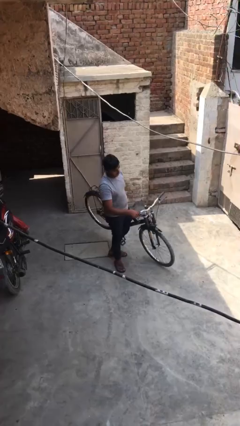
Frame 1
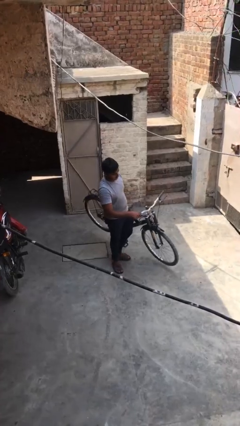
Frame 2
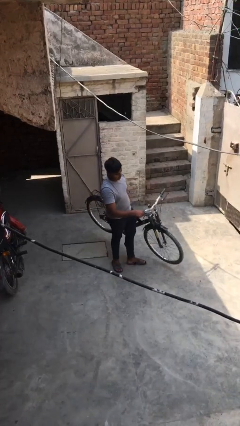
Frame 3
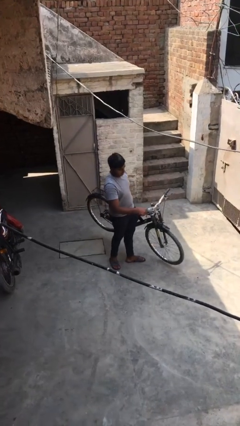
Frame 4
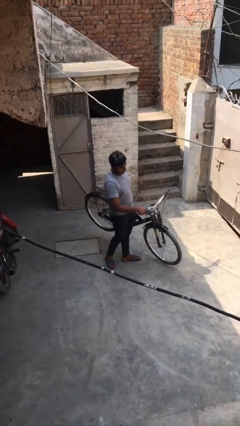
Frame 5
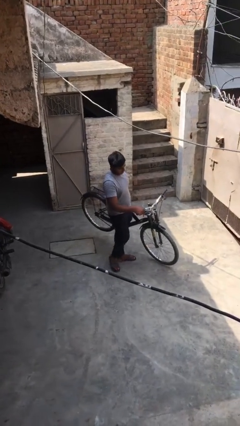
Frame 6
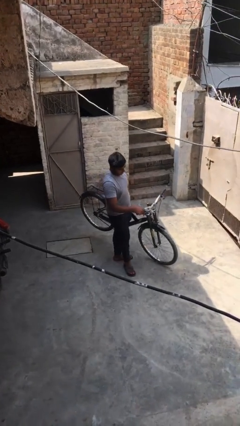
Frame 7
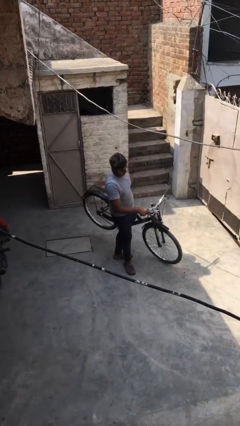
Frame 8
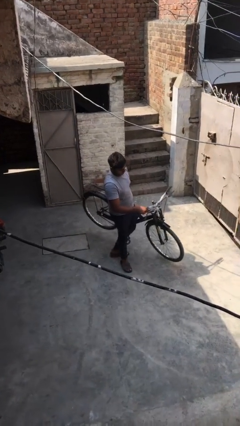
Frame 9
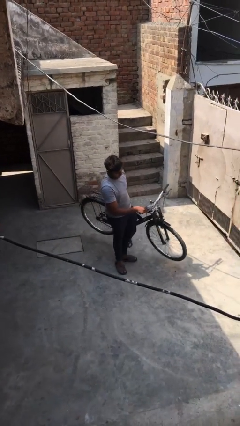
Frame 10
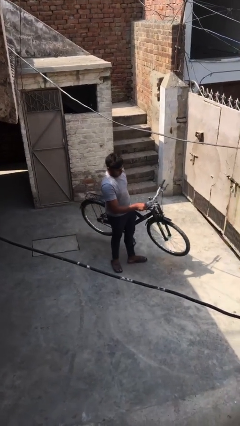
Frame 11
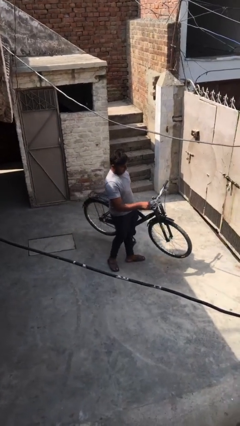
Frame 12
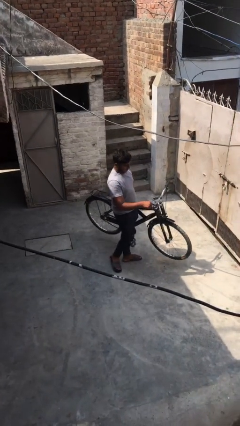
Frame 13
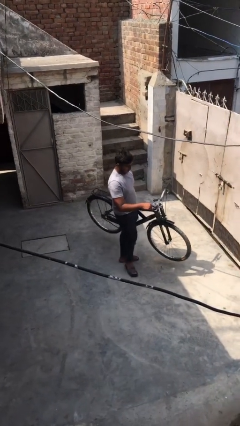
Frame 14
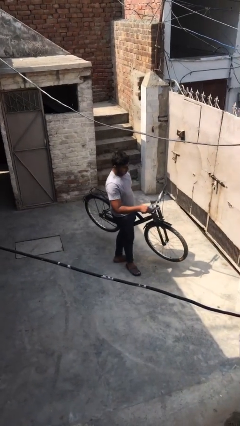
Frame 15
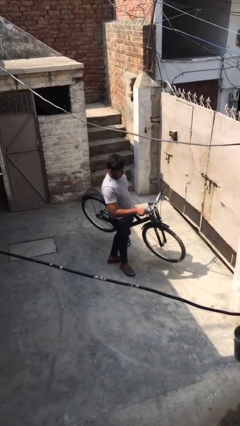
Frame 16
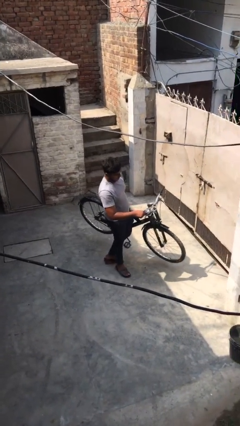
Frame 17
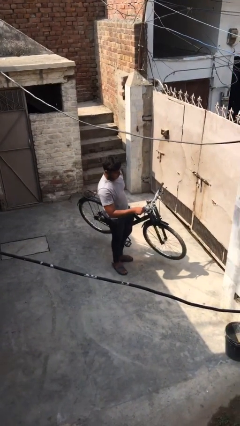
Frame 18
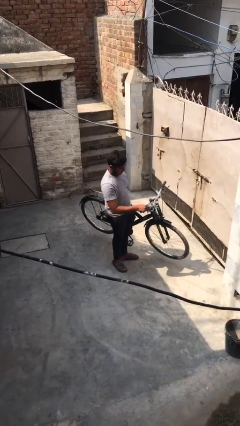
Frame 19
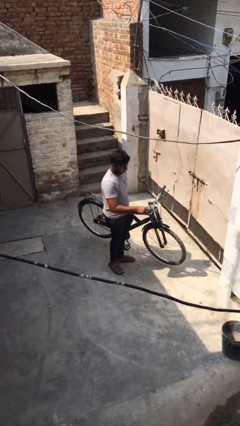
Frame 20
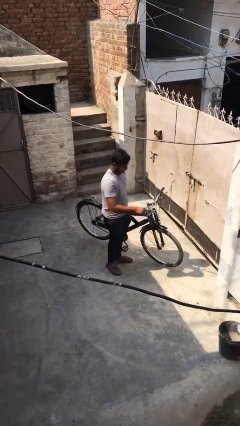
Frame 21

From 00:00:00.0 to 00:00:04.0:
person carries heavy object

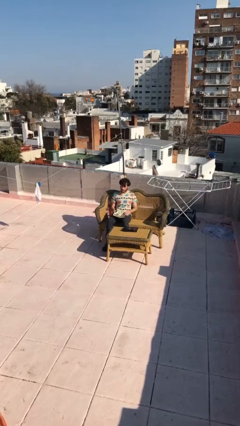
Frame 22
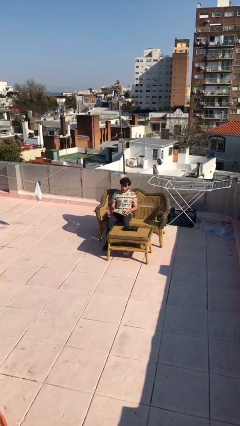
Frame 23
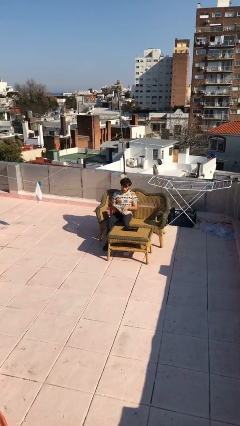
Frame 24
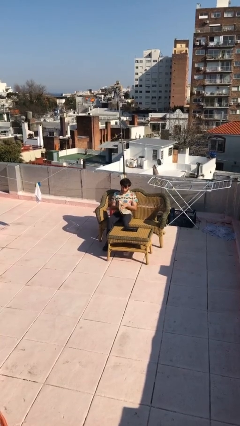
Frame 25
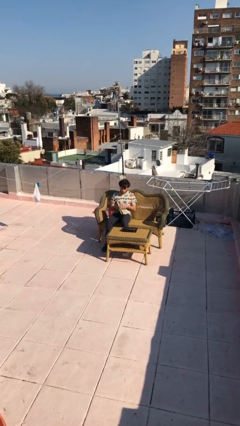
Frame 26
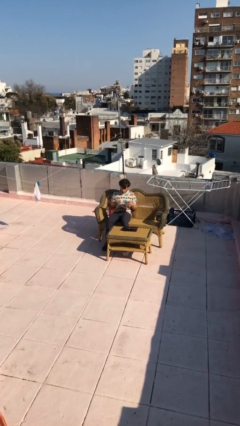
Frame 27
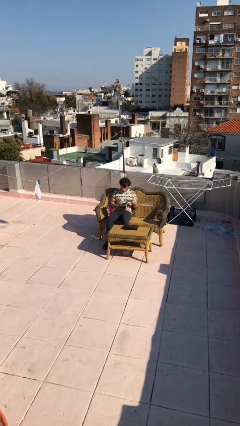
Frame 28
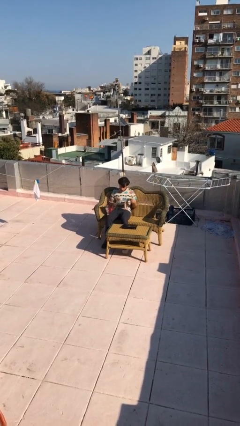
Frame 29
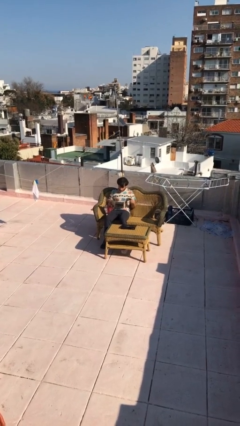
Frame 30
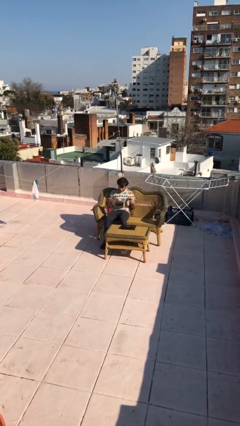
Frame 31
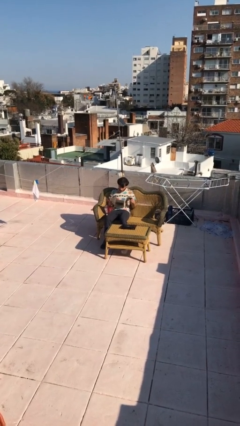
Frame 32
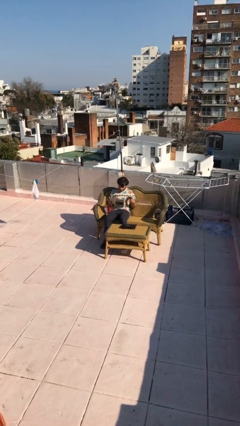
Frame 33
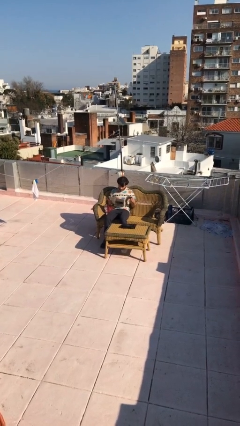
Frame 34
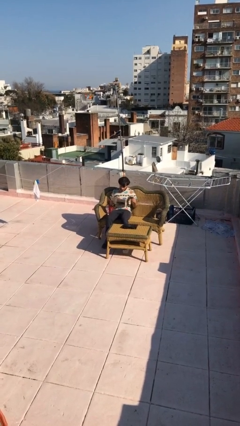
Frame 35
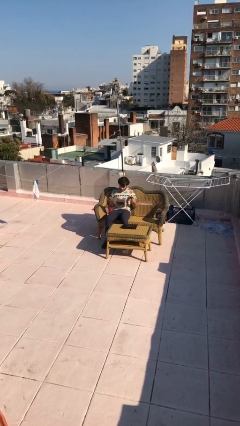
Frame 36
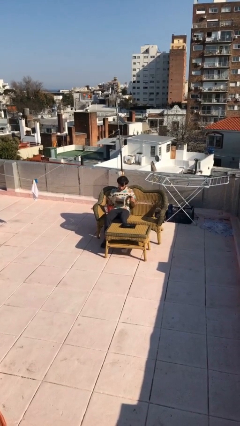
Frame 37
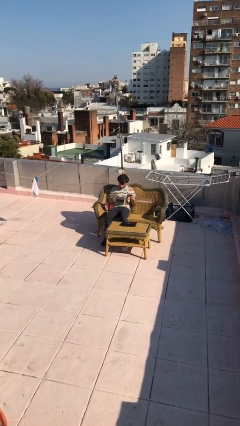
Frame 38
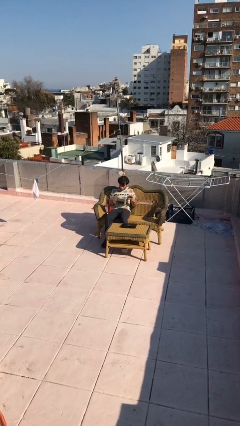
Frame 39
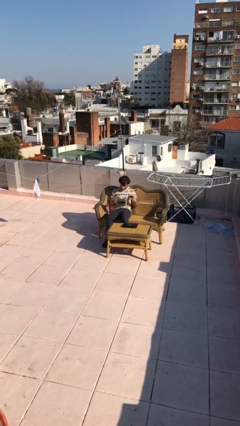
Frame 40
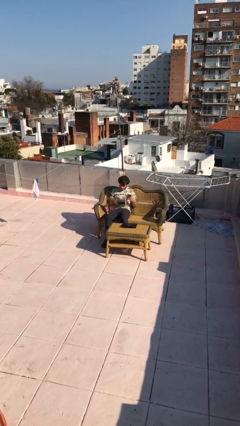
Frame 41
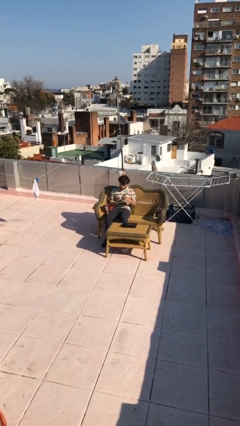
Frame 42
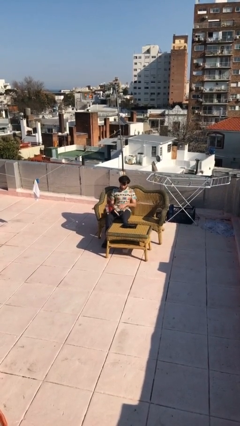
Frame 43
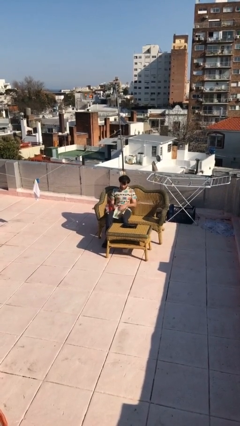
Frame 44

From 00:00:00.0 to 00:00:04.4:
person reads newspaper

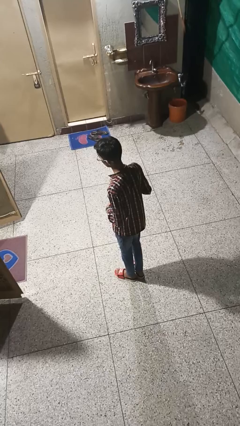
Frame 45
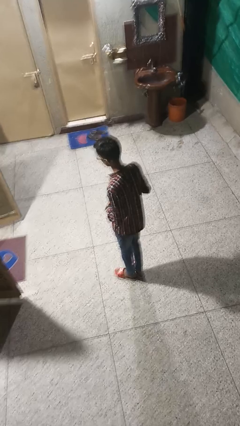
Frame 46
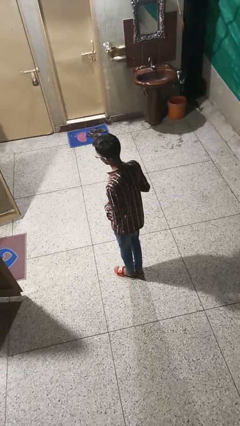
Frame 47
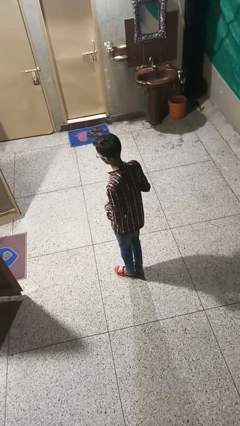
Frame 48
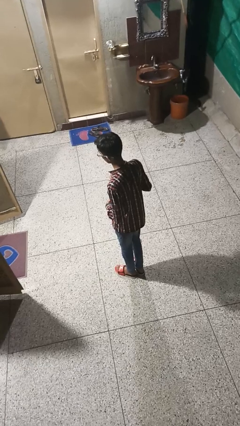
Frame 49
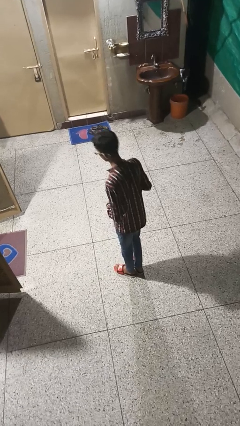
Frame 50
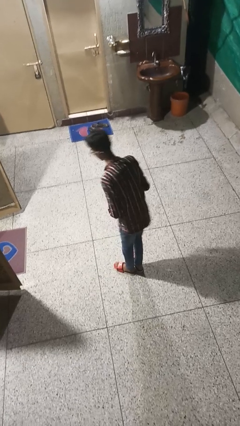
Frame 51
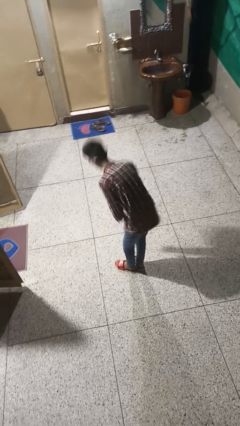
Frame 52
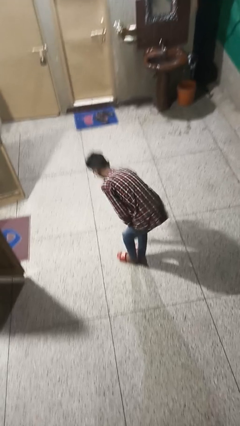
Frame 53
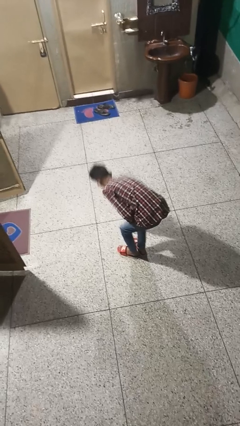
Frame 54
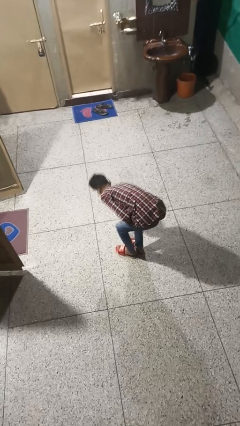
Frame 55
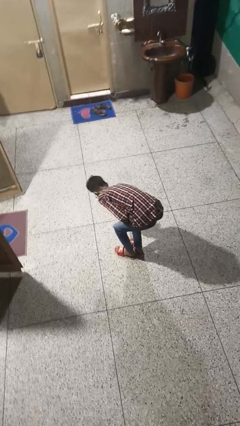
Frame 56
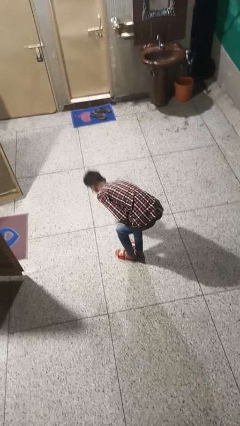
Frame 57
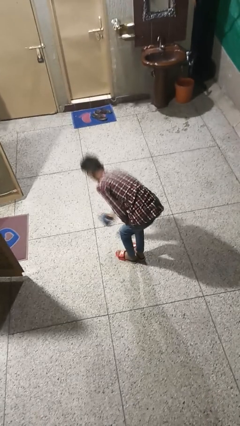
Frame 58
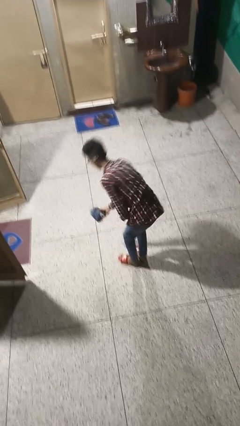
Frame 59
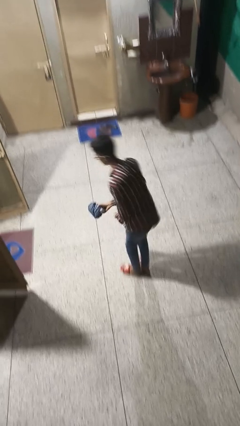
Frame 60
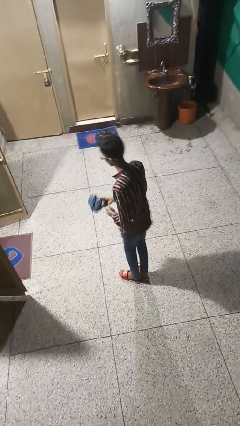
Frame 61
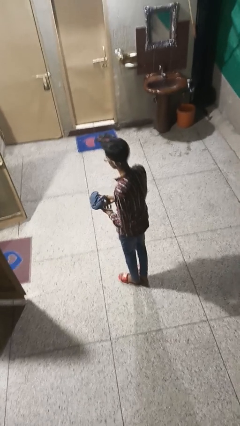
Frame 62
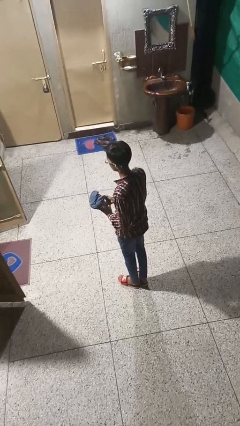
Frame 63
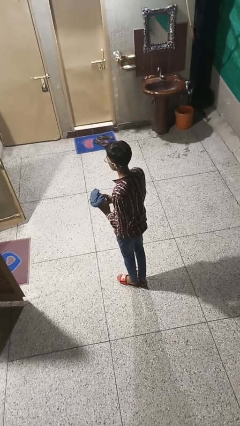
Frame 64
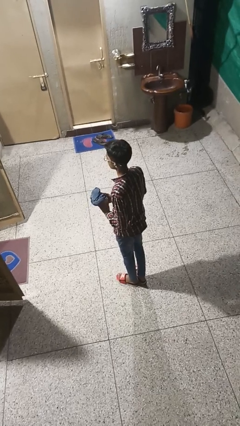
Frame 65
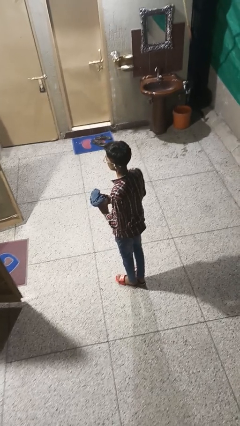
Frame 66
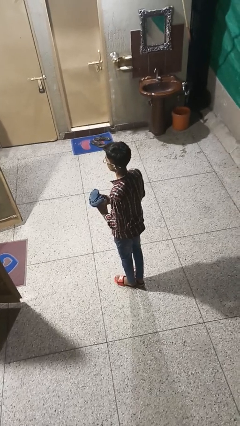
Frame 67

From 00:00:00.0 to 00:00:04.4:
person picks up object from floor

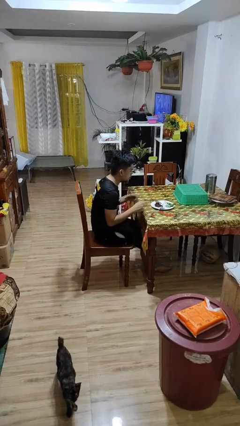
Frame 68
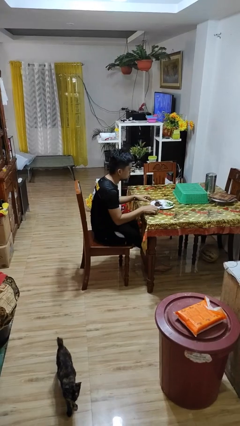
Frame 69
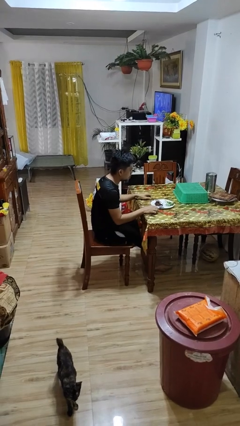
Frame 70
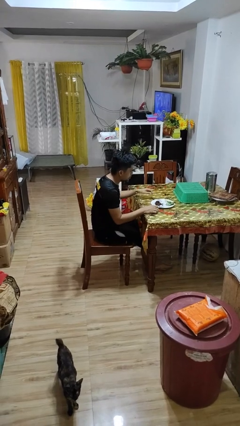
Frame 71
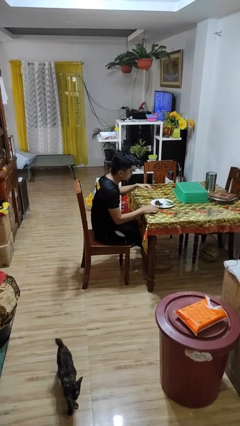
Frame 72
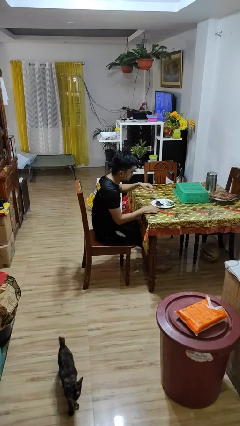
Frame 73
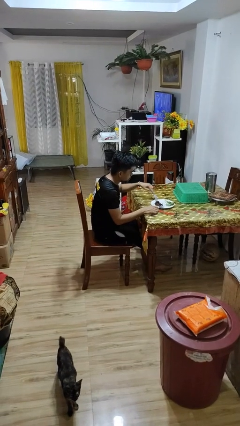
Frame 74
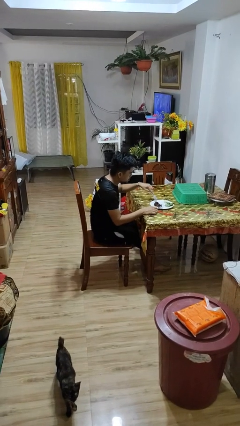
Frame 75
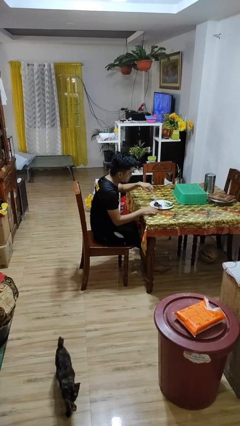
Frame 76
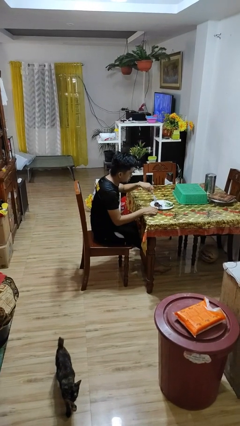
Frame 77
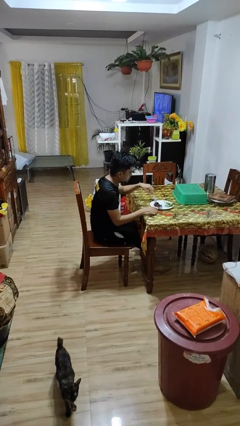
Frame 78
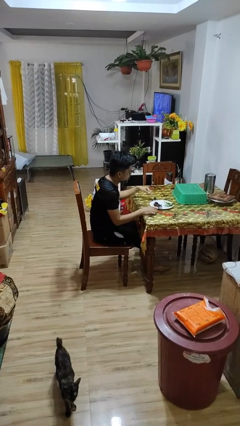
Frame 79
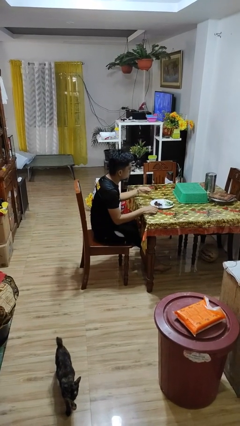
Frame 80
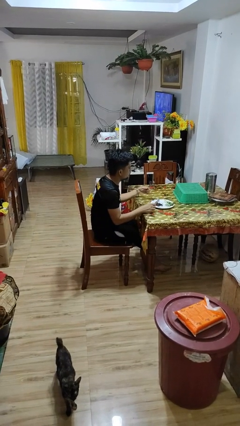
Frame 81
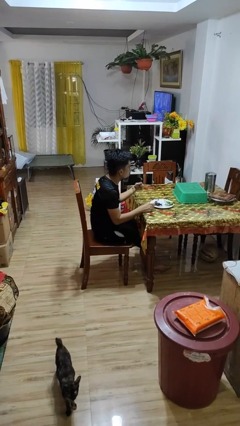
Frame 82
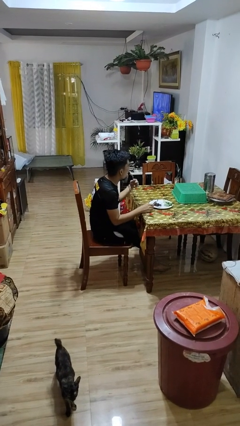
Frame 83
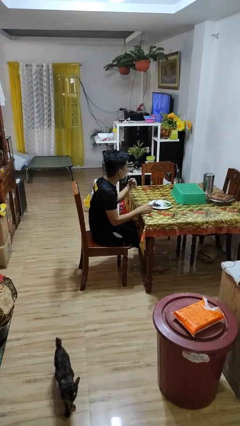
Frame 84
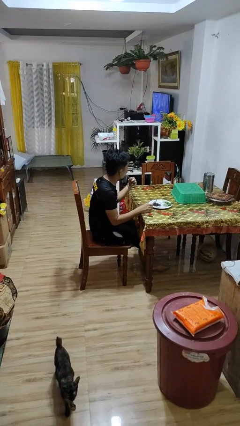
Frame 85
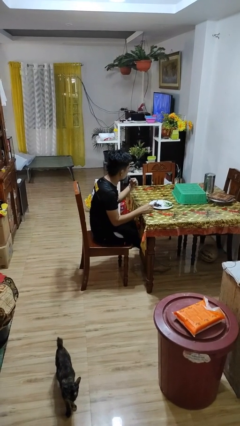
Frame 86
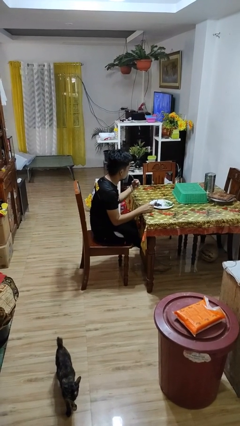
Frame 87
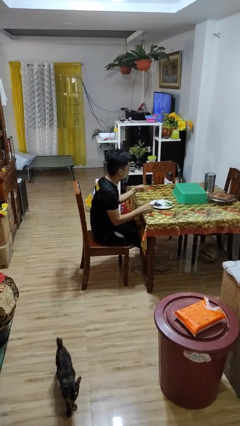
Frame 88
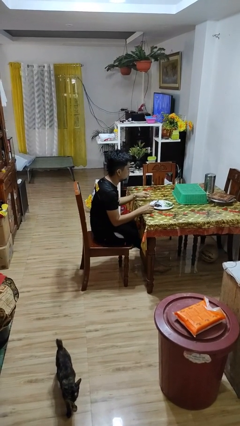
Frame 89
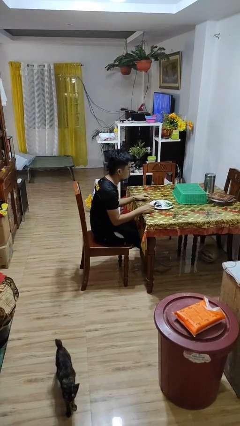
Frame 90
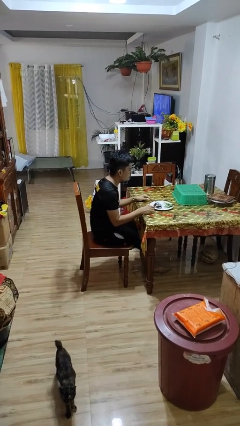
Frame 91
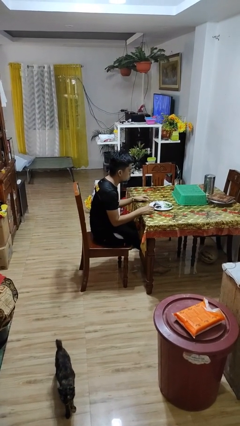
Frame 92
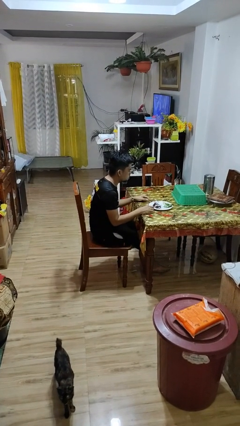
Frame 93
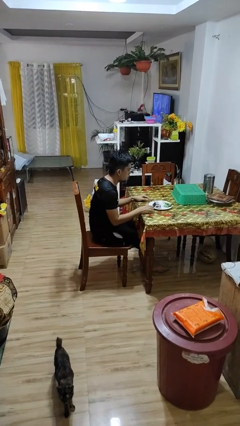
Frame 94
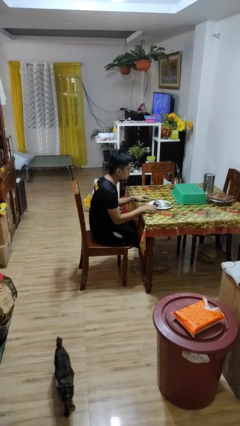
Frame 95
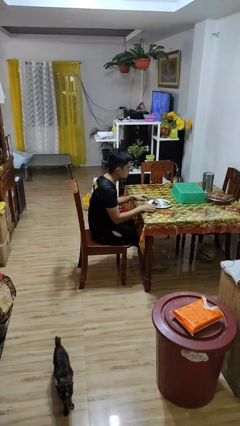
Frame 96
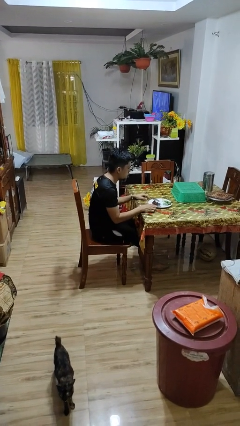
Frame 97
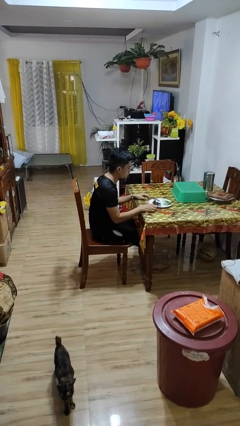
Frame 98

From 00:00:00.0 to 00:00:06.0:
person eats with utensil
